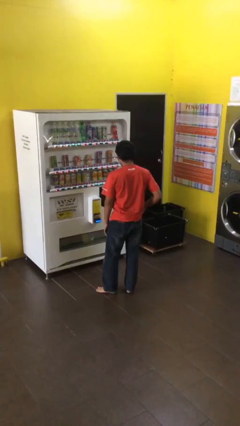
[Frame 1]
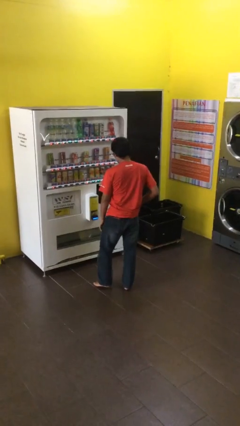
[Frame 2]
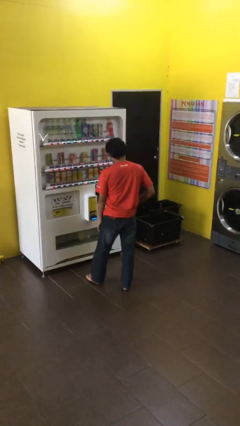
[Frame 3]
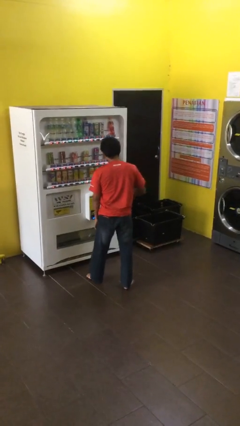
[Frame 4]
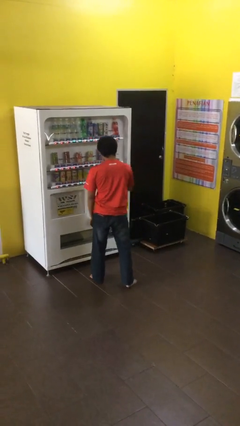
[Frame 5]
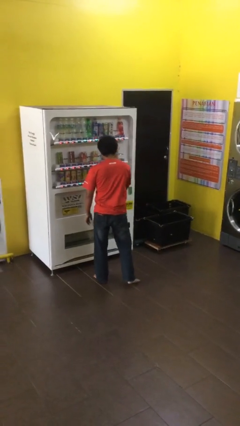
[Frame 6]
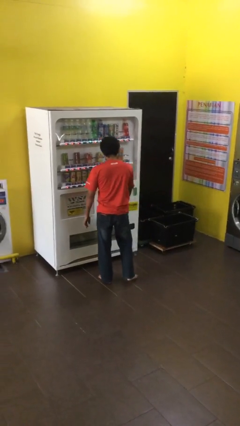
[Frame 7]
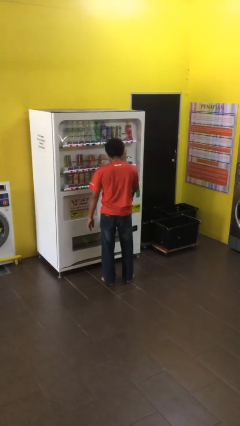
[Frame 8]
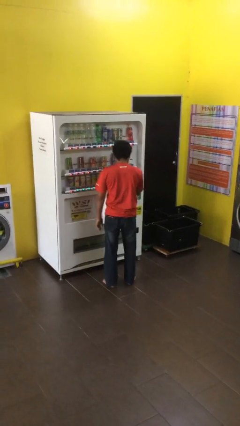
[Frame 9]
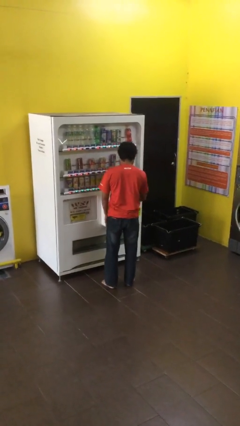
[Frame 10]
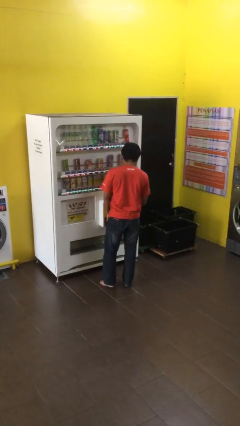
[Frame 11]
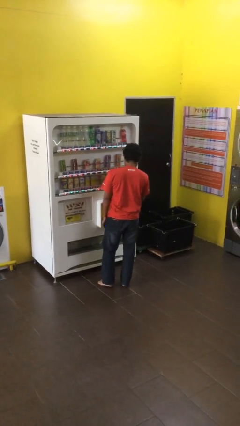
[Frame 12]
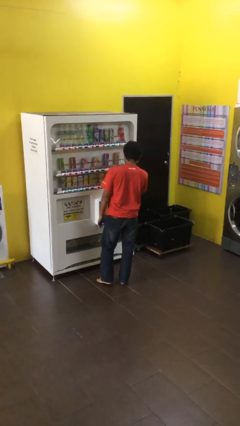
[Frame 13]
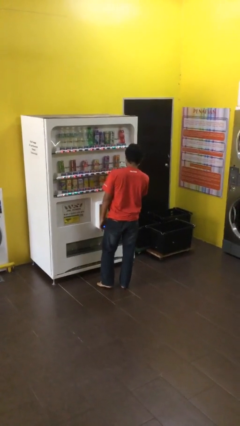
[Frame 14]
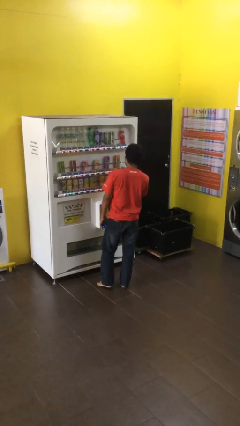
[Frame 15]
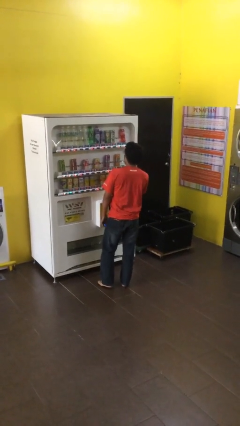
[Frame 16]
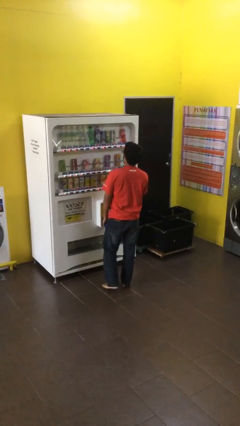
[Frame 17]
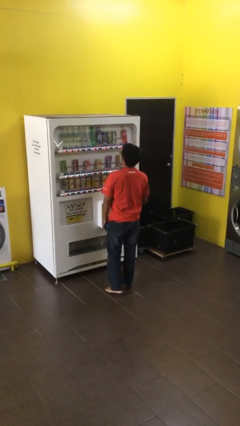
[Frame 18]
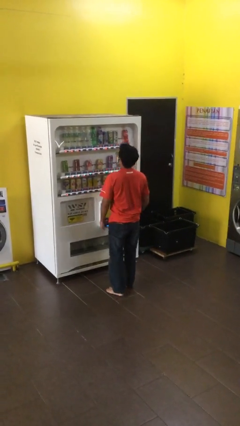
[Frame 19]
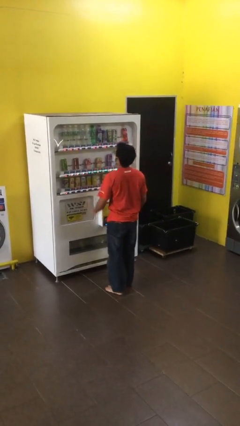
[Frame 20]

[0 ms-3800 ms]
person purchases from machine

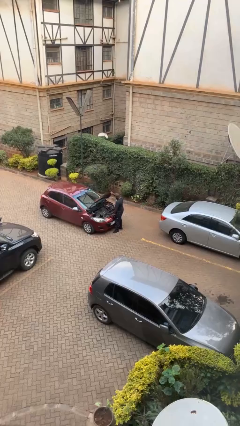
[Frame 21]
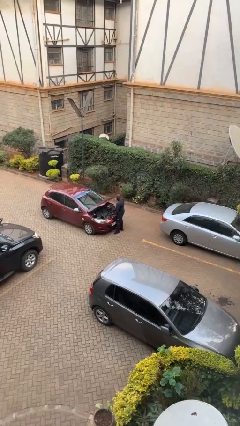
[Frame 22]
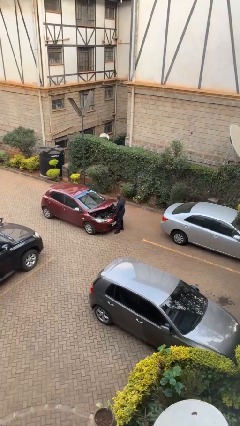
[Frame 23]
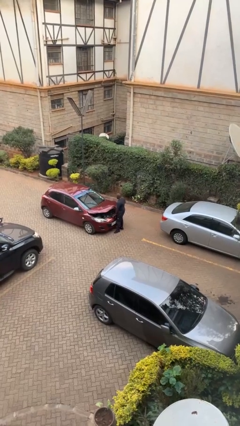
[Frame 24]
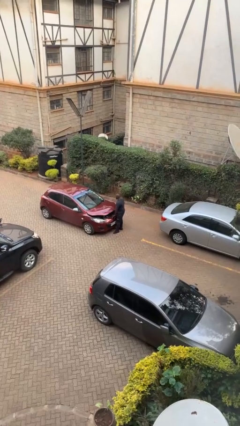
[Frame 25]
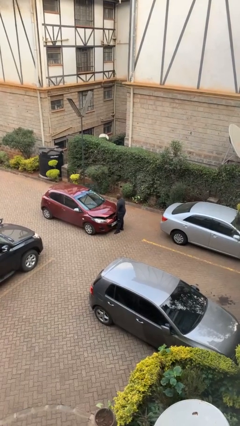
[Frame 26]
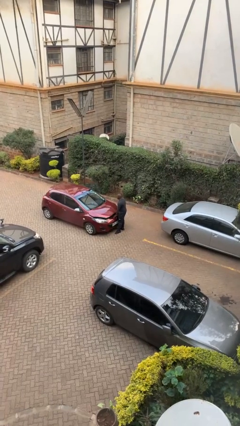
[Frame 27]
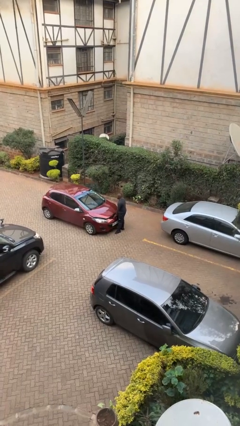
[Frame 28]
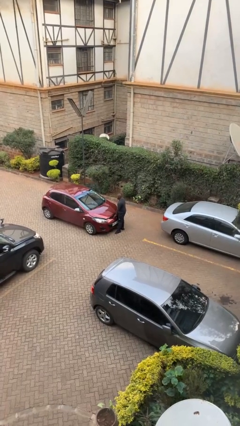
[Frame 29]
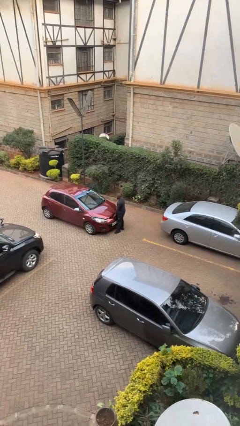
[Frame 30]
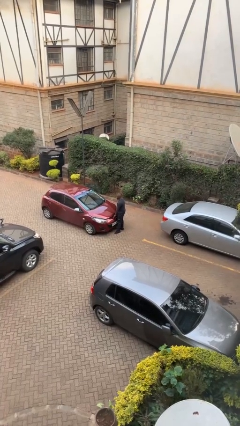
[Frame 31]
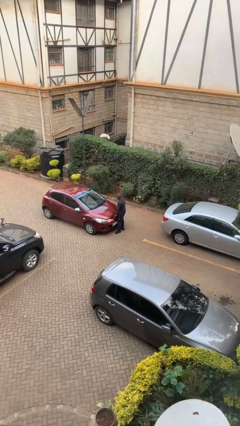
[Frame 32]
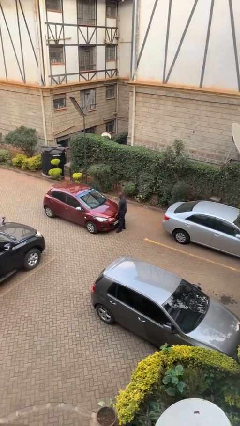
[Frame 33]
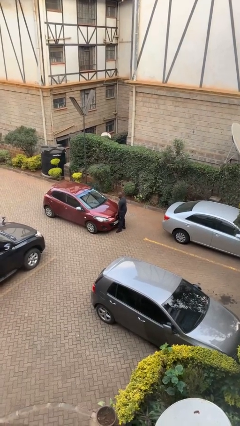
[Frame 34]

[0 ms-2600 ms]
person closes car hood

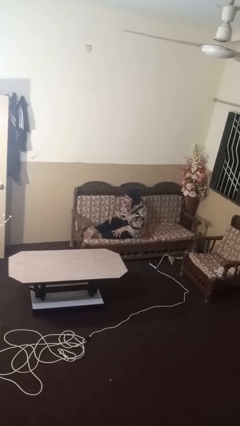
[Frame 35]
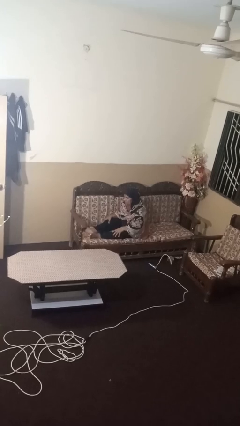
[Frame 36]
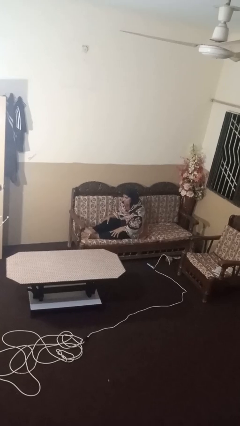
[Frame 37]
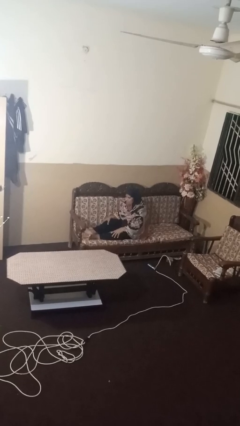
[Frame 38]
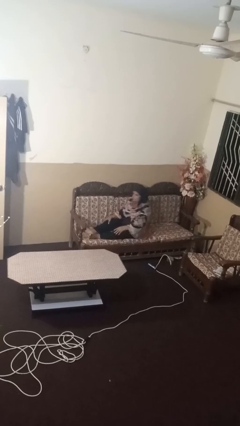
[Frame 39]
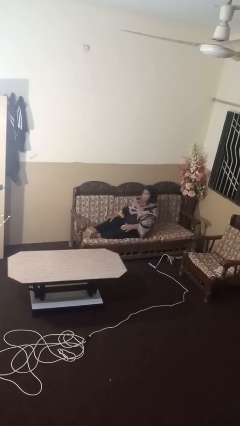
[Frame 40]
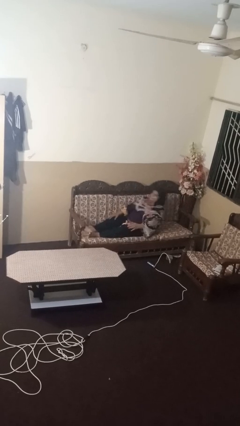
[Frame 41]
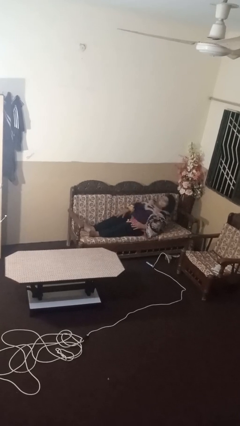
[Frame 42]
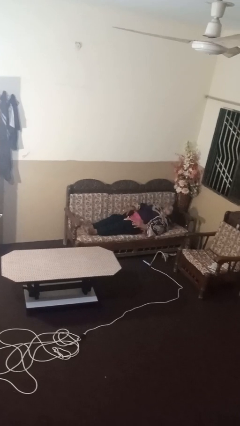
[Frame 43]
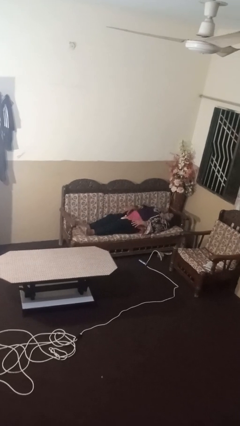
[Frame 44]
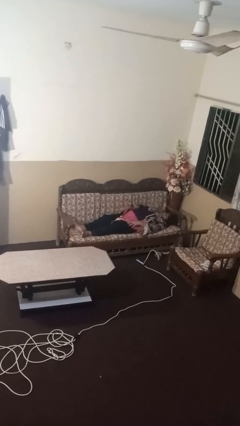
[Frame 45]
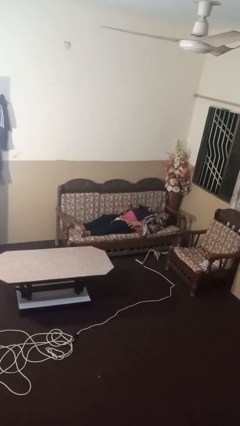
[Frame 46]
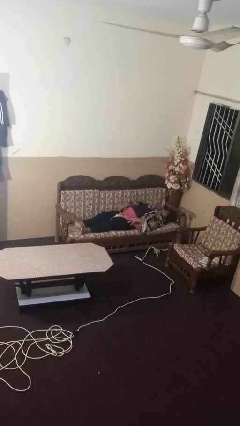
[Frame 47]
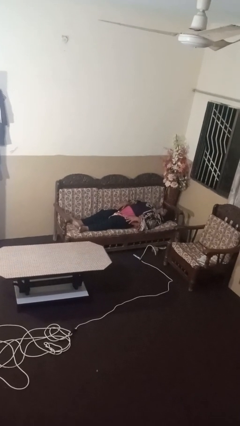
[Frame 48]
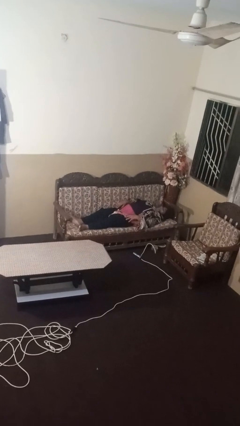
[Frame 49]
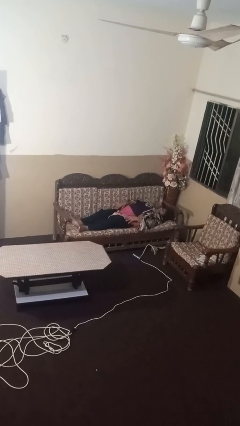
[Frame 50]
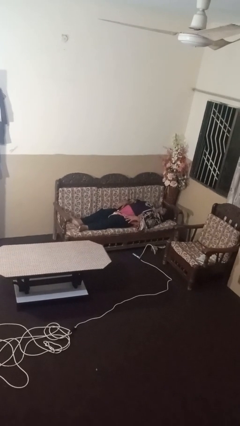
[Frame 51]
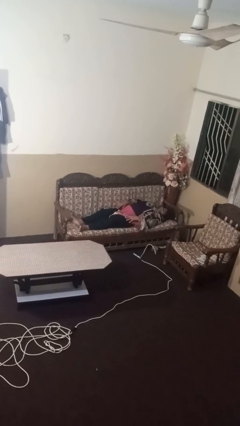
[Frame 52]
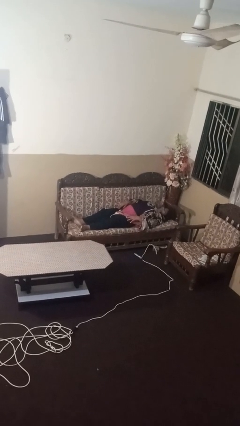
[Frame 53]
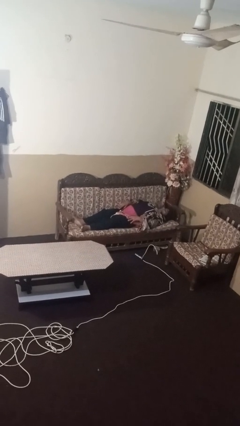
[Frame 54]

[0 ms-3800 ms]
person lies down on couch

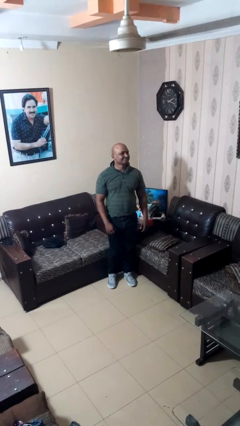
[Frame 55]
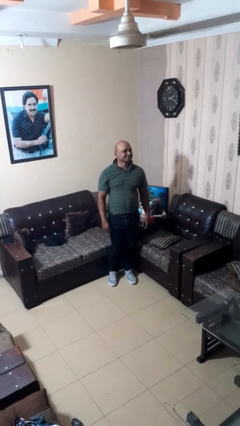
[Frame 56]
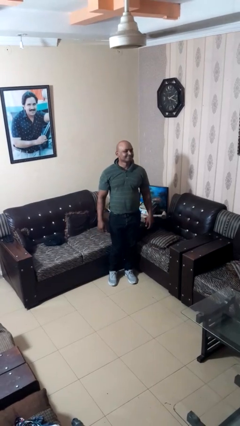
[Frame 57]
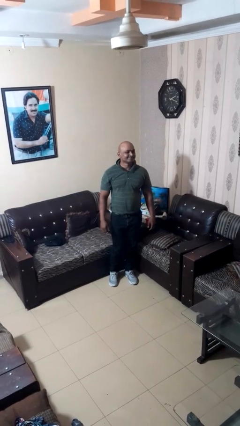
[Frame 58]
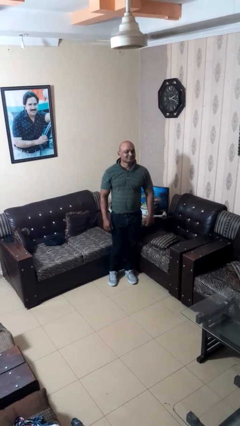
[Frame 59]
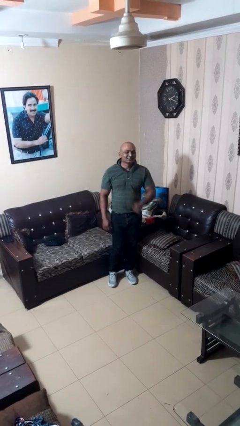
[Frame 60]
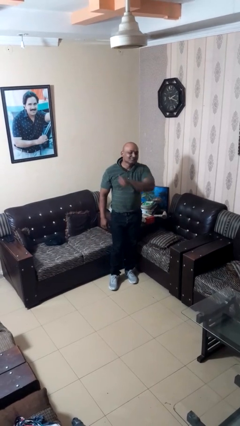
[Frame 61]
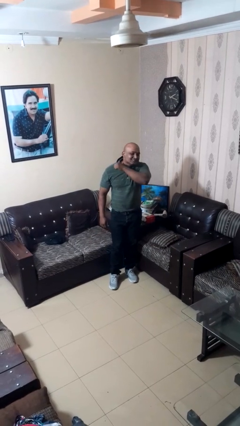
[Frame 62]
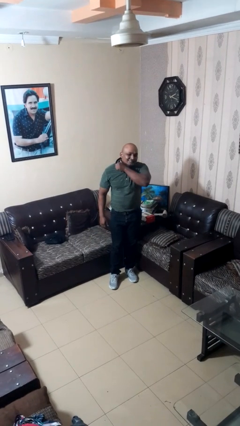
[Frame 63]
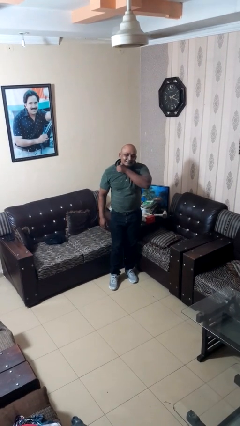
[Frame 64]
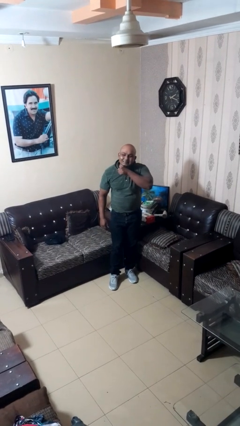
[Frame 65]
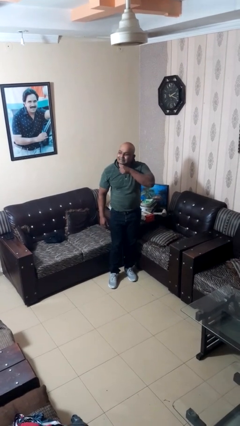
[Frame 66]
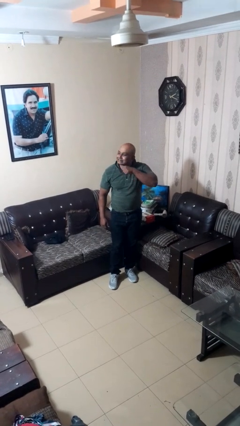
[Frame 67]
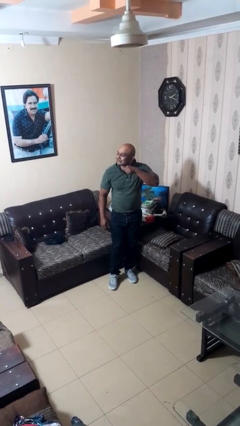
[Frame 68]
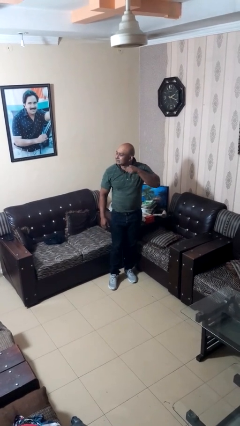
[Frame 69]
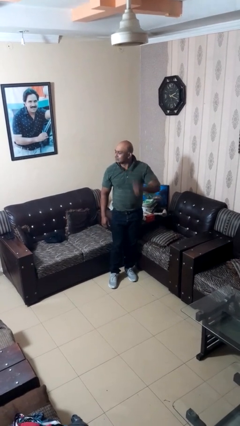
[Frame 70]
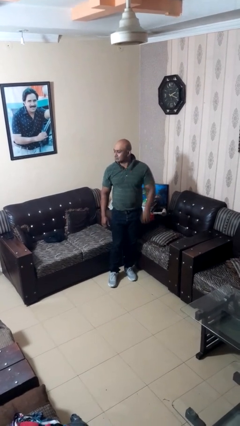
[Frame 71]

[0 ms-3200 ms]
person gestures cut

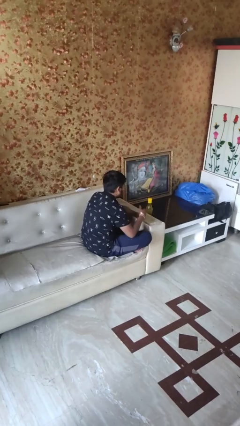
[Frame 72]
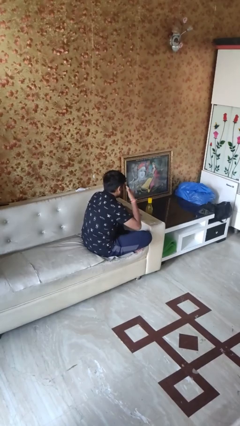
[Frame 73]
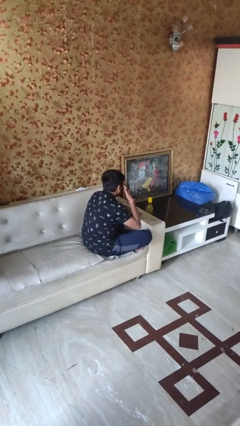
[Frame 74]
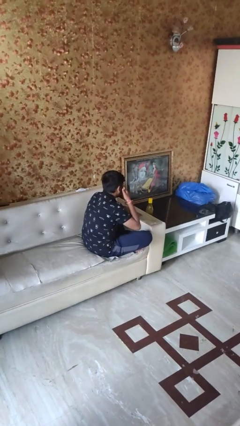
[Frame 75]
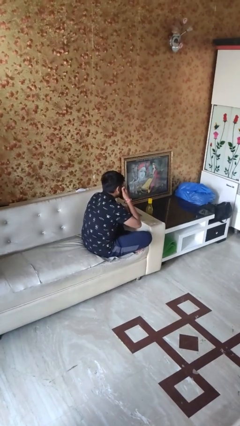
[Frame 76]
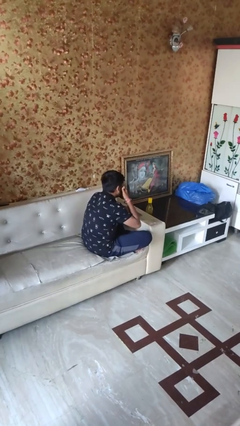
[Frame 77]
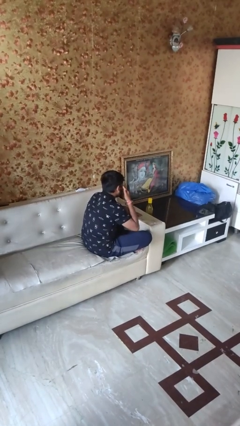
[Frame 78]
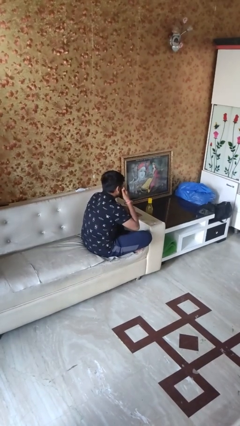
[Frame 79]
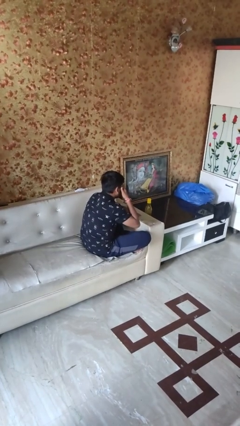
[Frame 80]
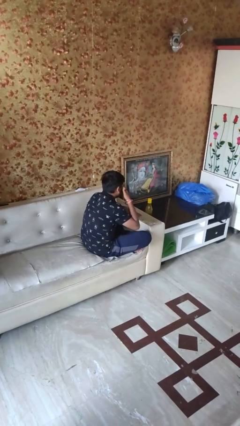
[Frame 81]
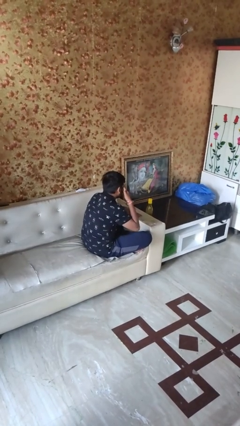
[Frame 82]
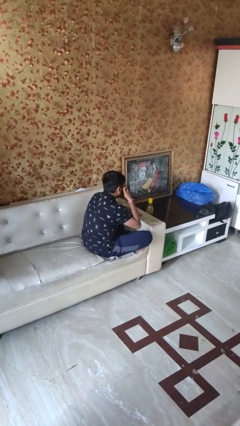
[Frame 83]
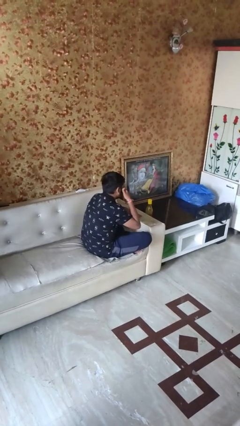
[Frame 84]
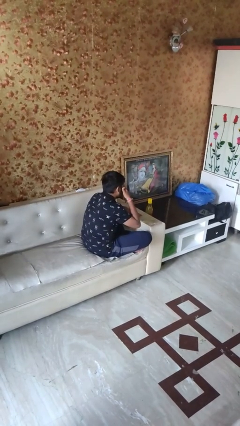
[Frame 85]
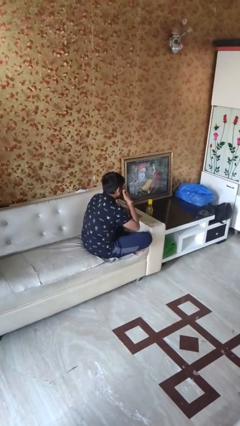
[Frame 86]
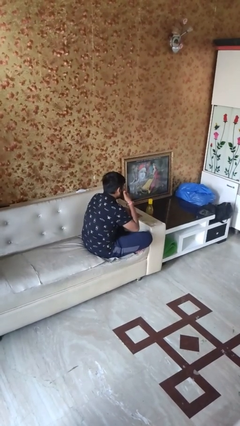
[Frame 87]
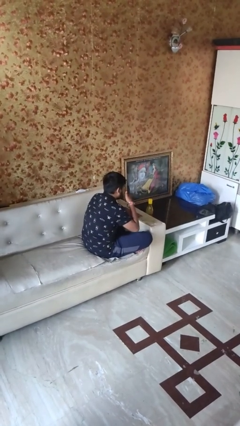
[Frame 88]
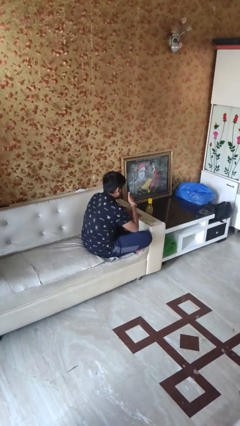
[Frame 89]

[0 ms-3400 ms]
person rubs eyes

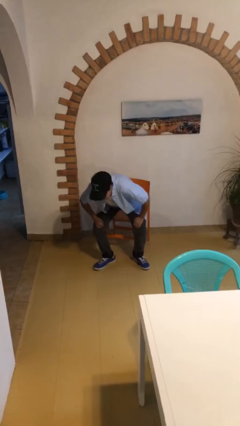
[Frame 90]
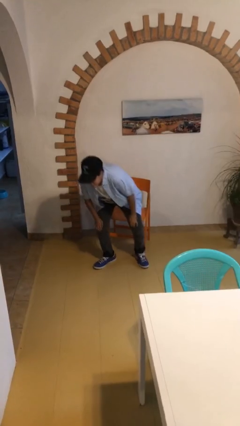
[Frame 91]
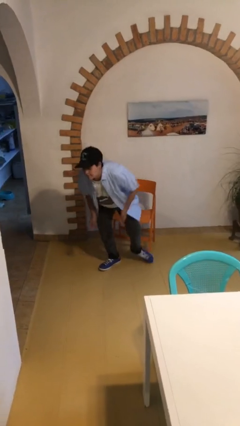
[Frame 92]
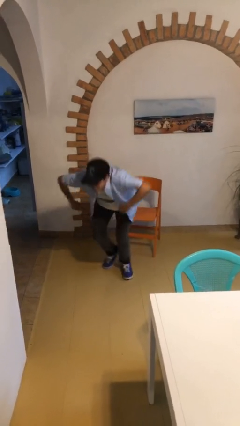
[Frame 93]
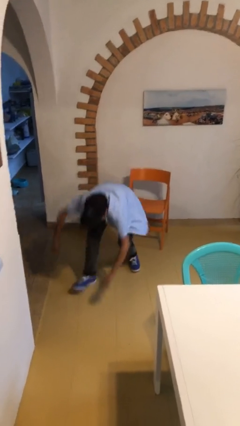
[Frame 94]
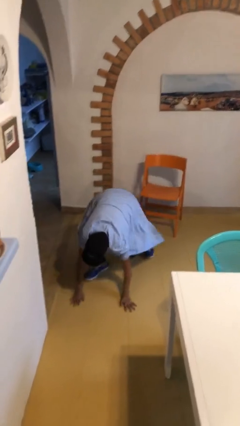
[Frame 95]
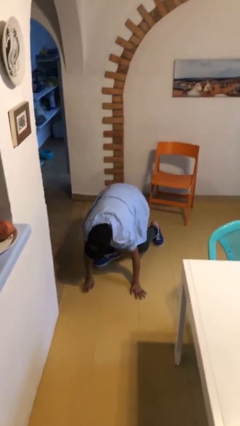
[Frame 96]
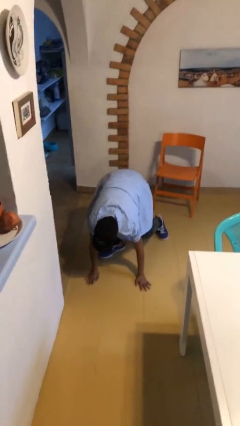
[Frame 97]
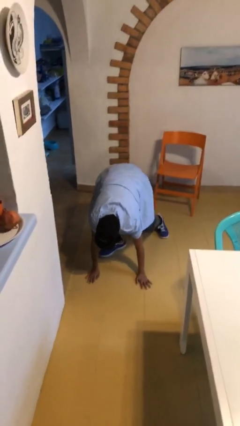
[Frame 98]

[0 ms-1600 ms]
person falls from chair
